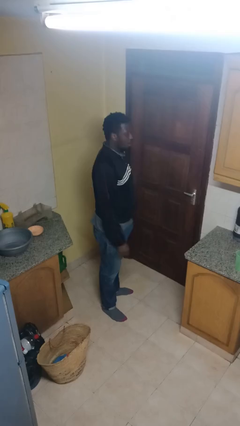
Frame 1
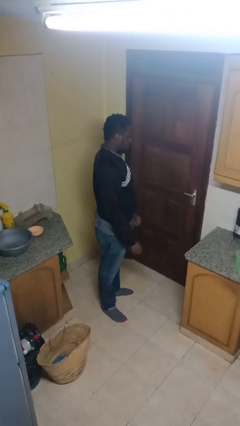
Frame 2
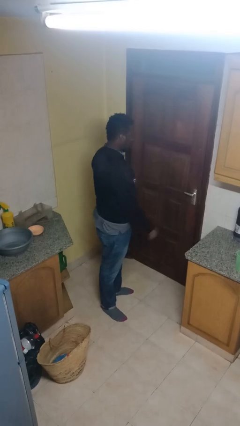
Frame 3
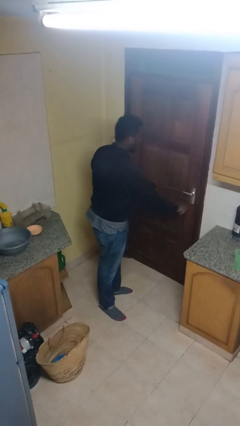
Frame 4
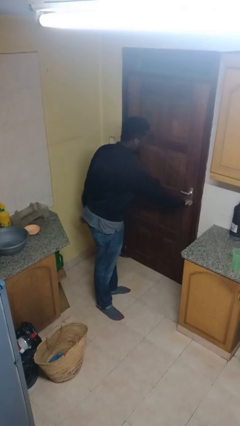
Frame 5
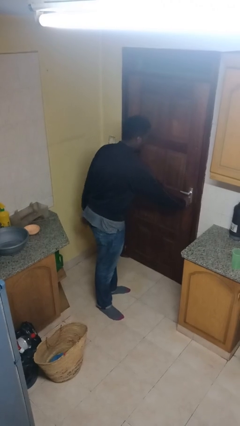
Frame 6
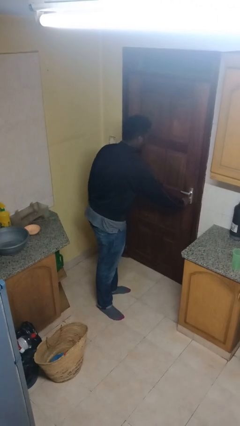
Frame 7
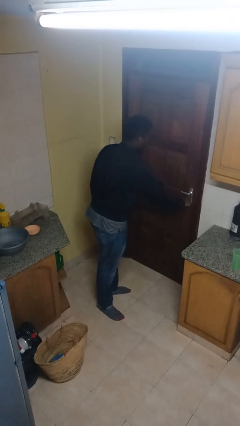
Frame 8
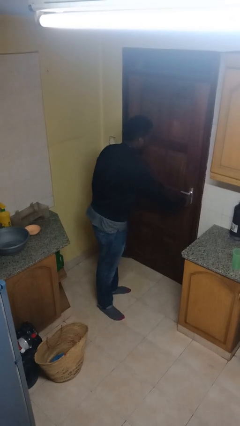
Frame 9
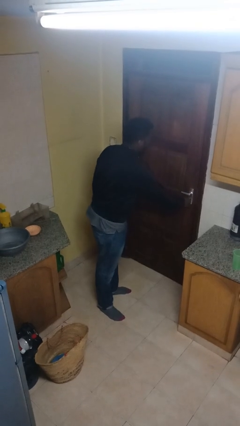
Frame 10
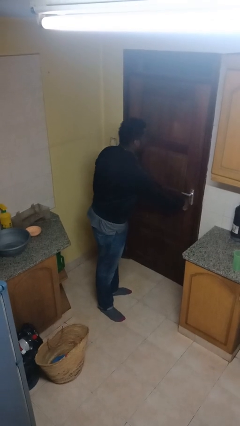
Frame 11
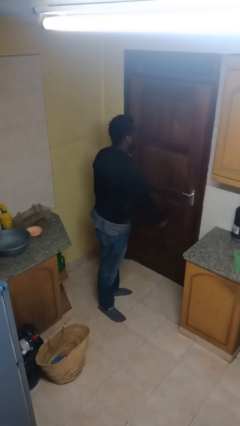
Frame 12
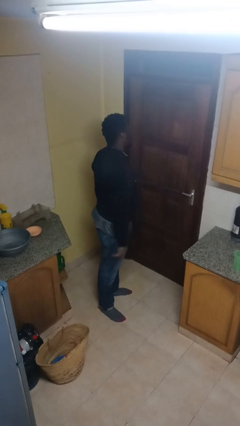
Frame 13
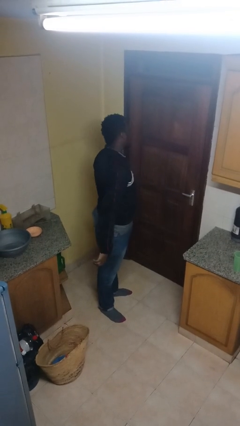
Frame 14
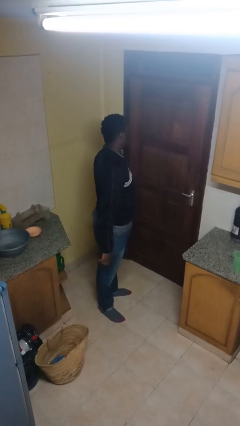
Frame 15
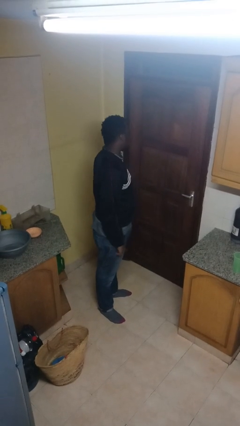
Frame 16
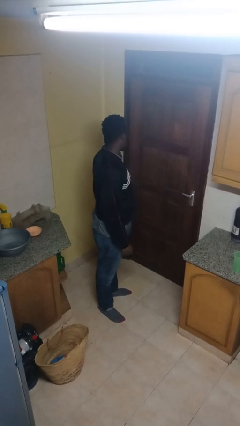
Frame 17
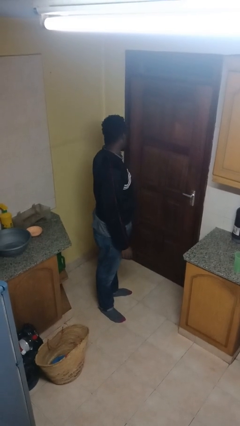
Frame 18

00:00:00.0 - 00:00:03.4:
person locks door with keys

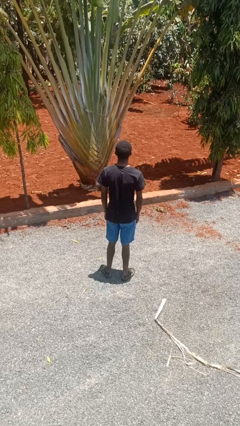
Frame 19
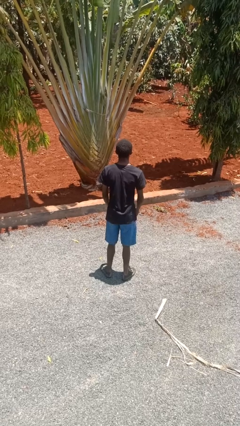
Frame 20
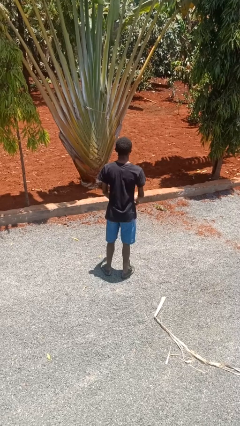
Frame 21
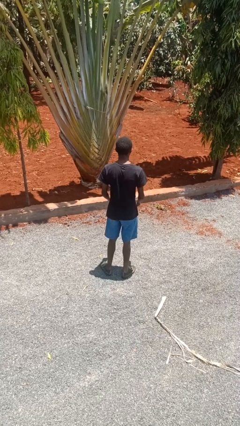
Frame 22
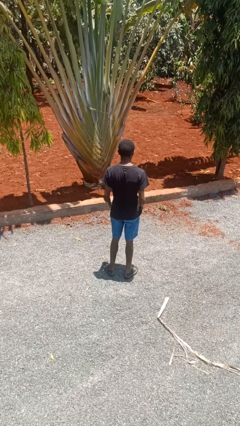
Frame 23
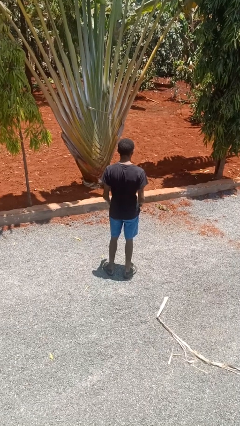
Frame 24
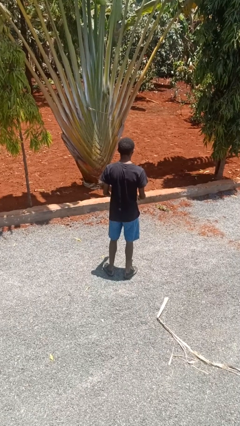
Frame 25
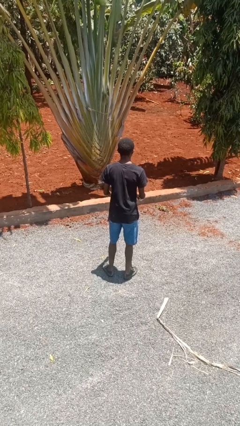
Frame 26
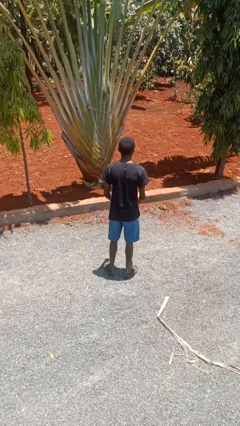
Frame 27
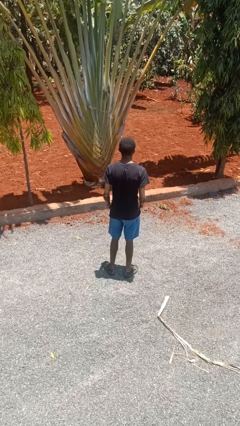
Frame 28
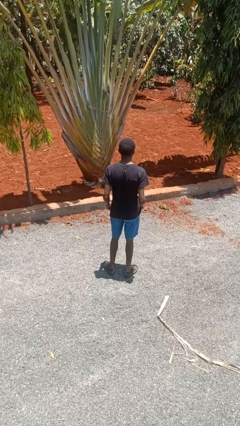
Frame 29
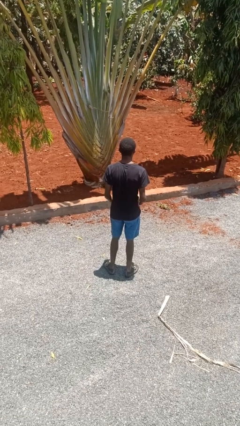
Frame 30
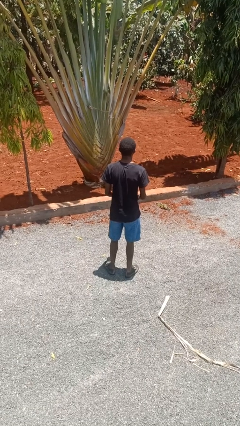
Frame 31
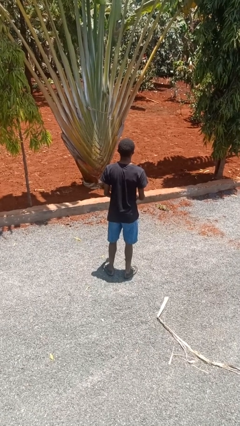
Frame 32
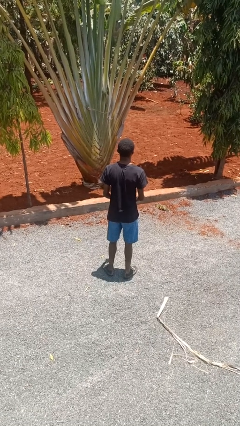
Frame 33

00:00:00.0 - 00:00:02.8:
person wiggles hips

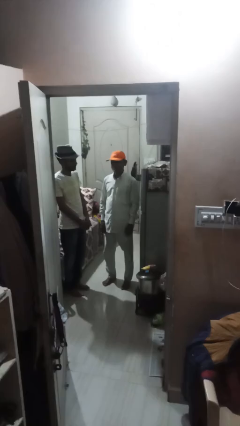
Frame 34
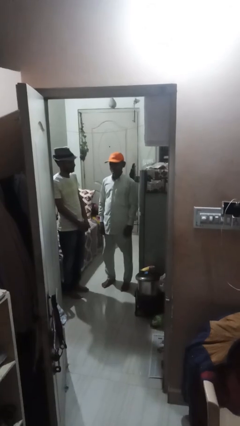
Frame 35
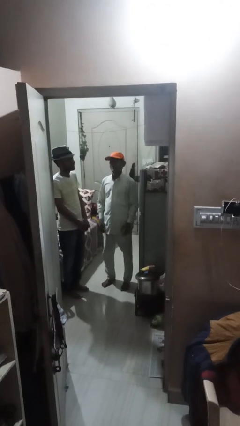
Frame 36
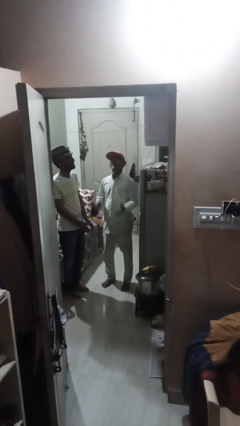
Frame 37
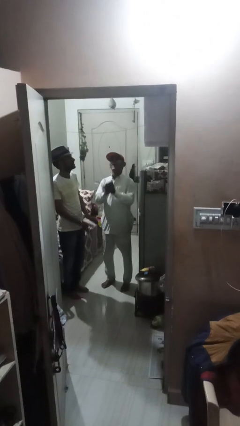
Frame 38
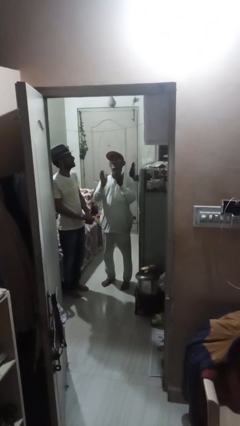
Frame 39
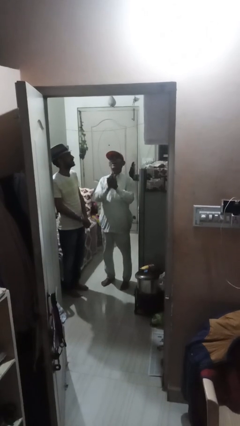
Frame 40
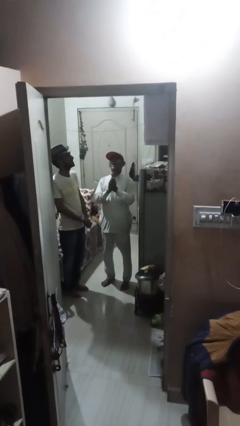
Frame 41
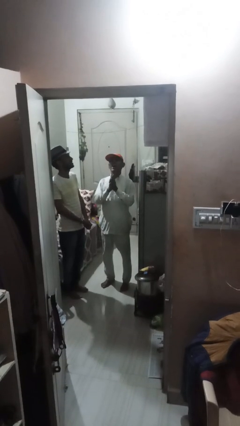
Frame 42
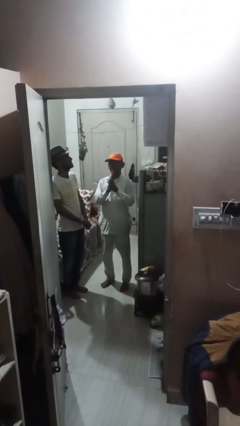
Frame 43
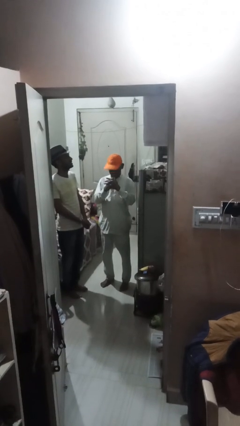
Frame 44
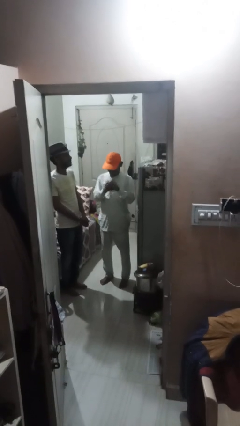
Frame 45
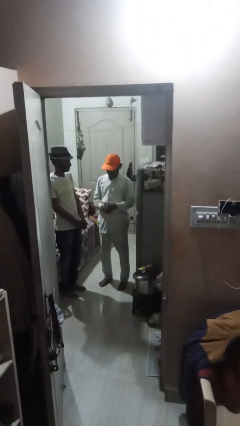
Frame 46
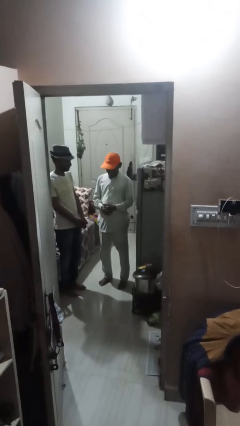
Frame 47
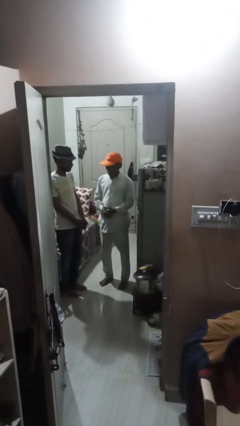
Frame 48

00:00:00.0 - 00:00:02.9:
person laughs with person

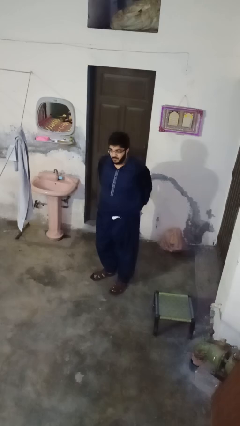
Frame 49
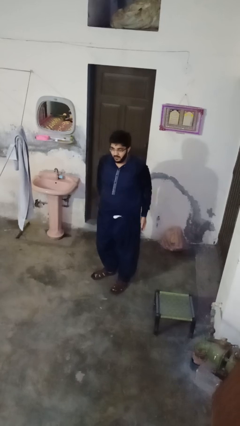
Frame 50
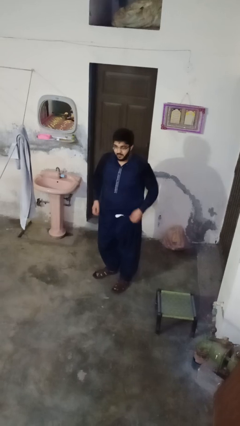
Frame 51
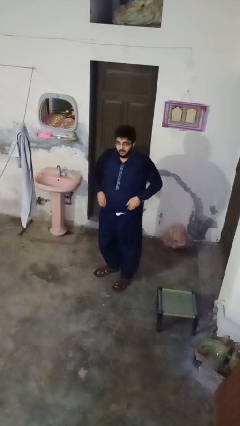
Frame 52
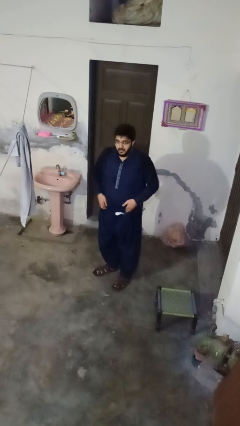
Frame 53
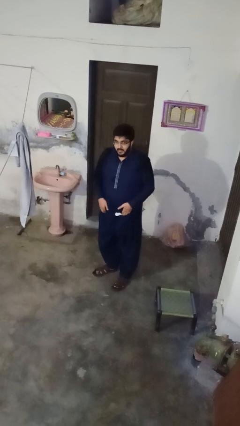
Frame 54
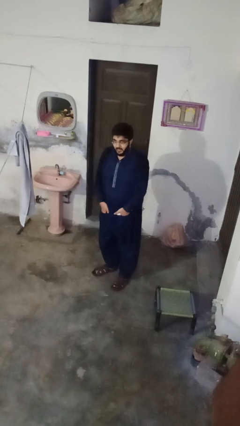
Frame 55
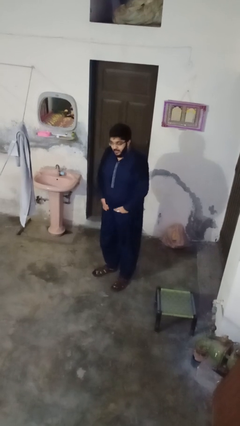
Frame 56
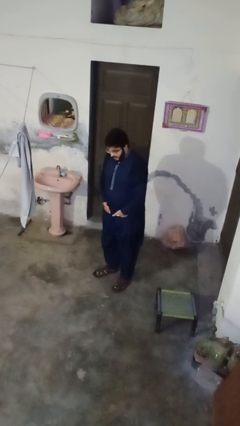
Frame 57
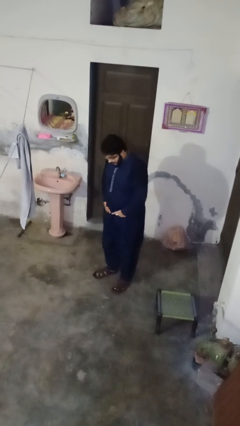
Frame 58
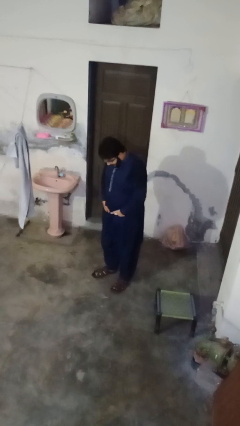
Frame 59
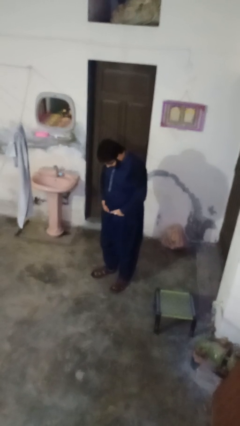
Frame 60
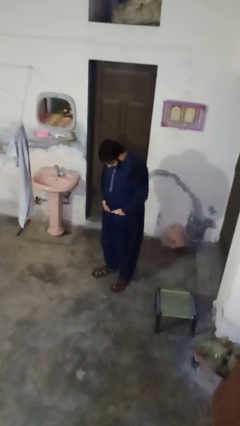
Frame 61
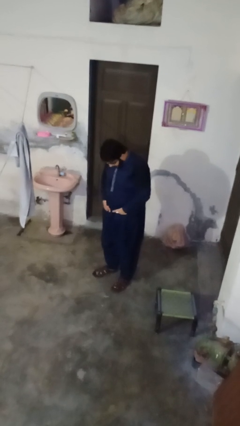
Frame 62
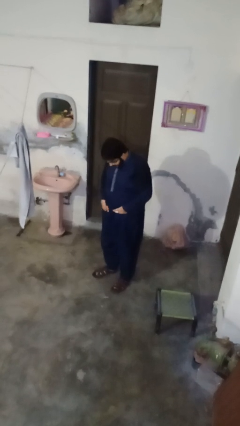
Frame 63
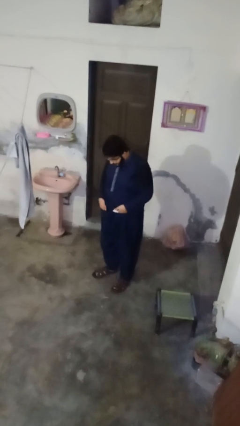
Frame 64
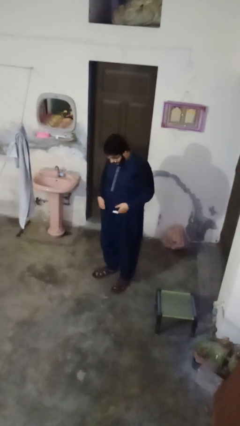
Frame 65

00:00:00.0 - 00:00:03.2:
person puts hands in back pockets

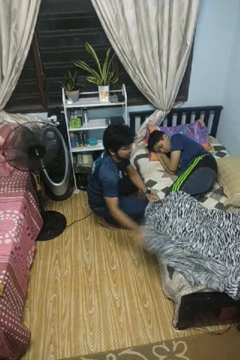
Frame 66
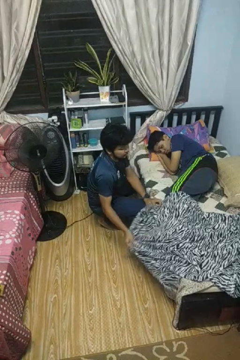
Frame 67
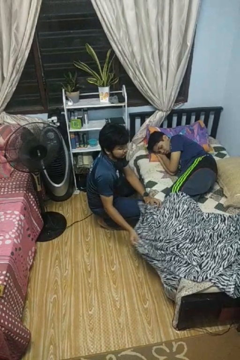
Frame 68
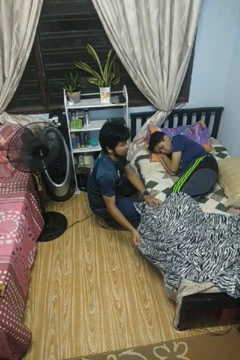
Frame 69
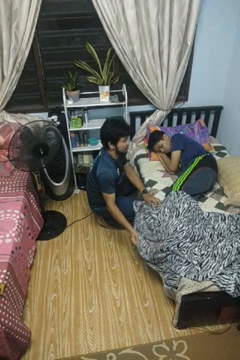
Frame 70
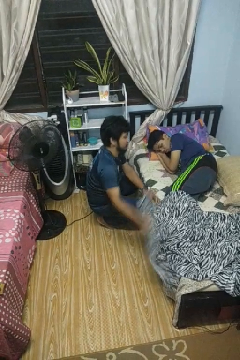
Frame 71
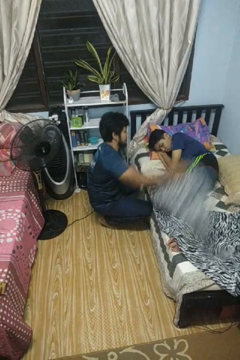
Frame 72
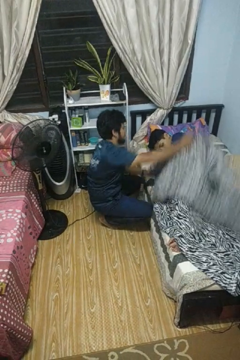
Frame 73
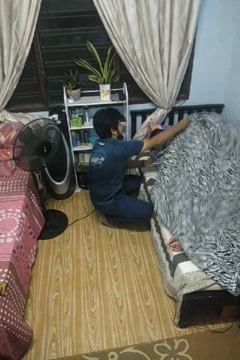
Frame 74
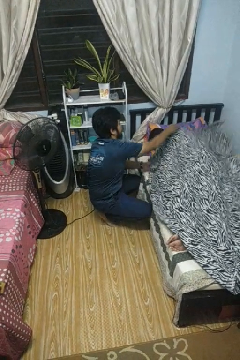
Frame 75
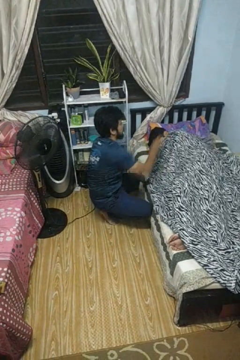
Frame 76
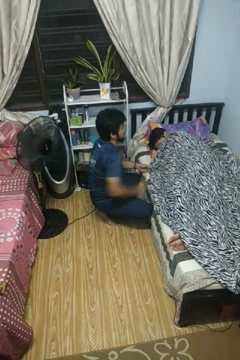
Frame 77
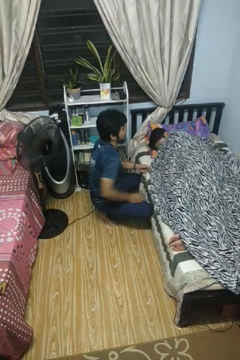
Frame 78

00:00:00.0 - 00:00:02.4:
person covers friend with blanket

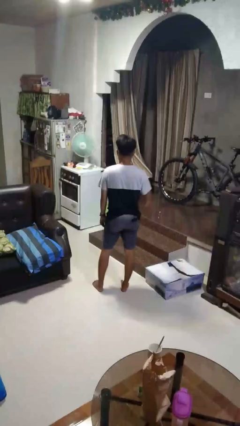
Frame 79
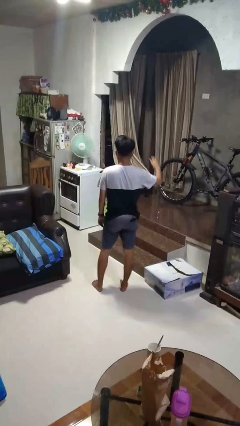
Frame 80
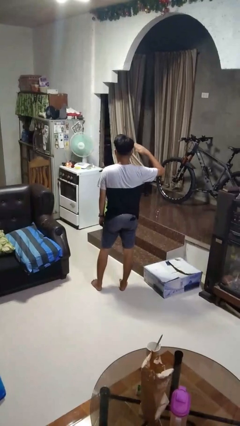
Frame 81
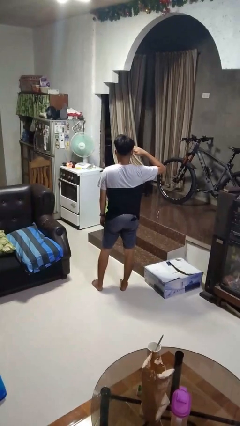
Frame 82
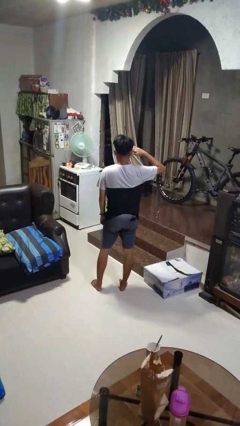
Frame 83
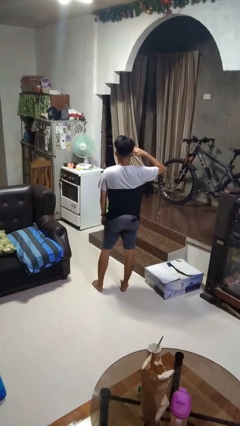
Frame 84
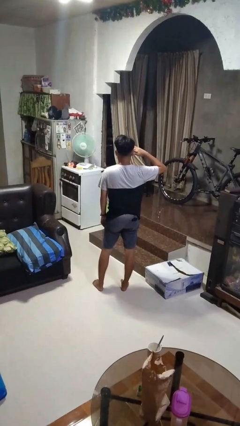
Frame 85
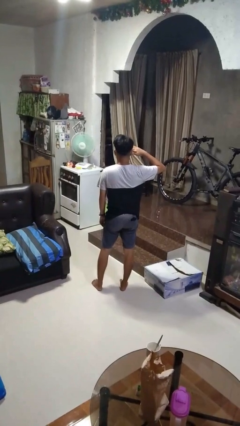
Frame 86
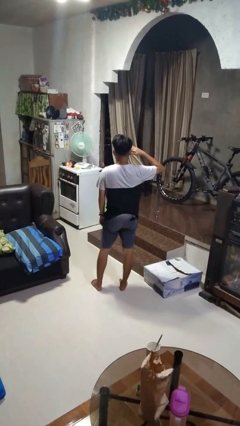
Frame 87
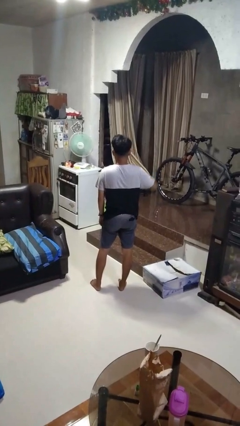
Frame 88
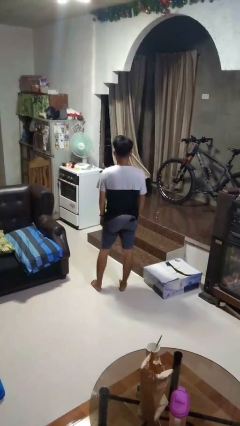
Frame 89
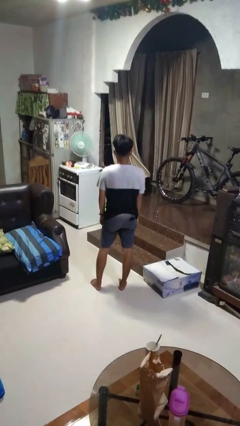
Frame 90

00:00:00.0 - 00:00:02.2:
person salutes

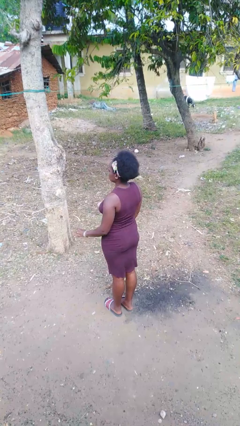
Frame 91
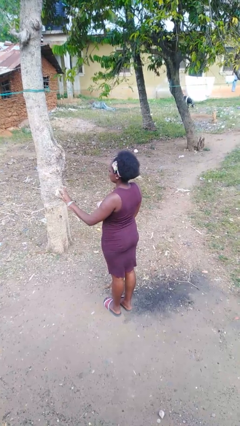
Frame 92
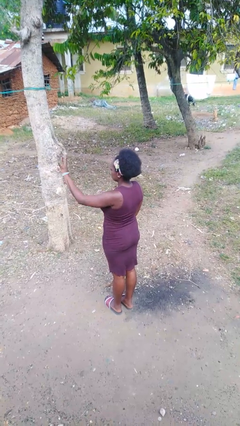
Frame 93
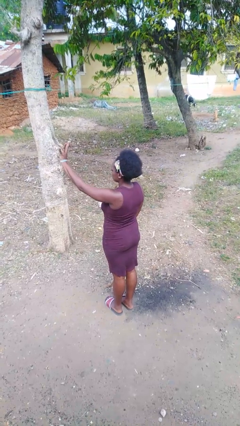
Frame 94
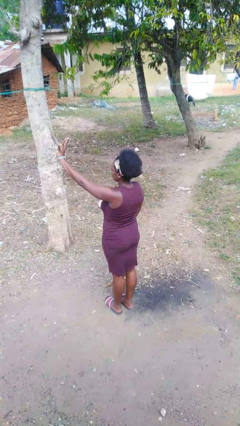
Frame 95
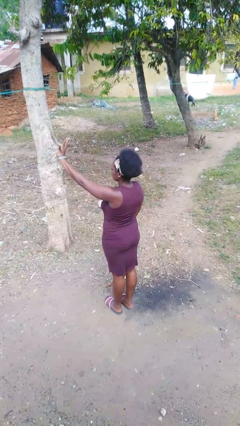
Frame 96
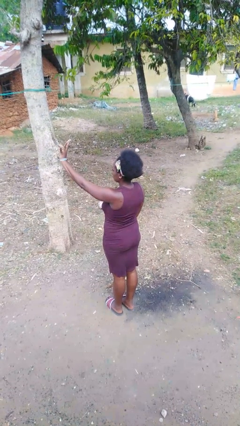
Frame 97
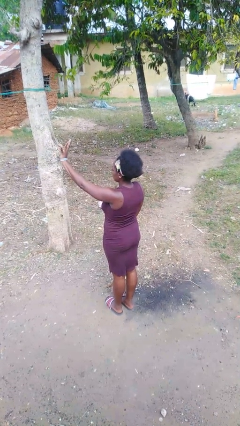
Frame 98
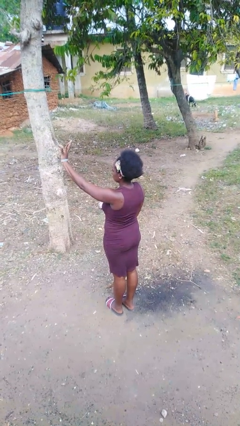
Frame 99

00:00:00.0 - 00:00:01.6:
person gestures number four
